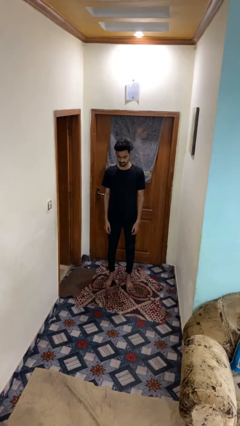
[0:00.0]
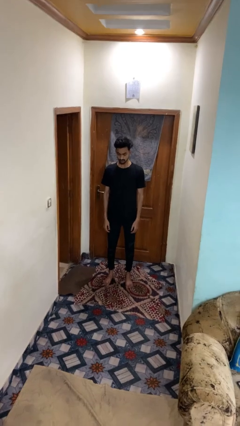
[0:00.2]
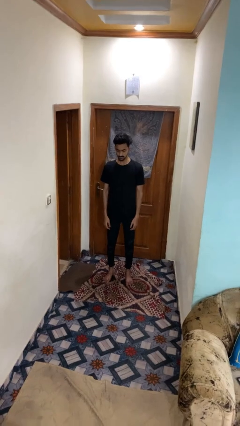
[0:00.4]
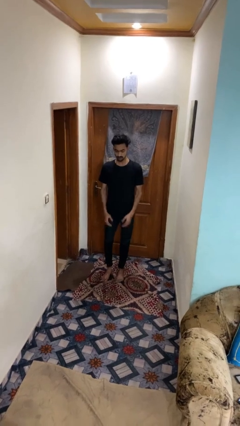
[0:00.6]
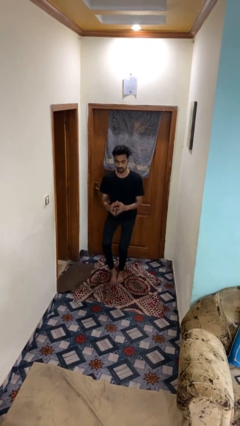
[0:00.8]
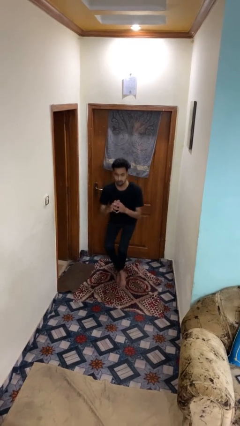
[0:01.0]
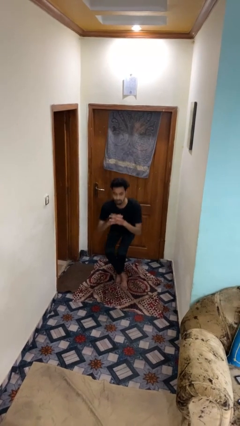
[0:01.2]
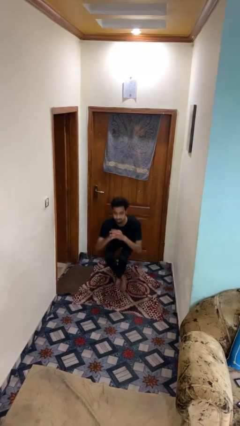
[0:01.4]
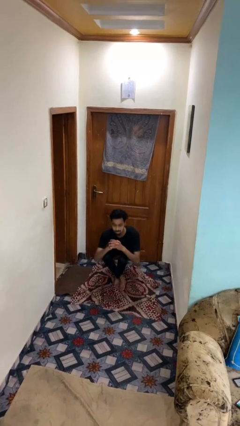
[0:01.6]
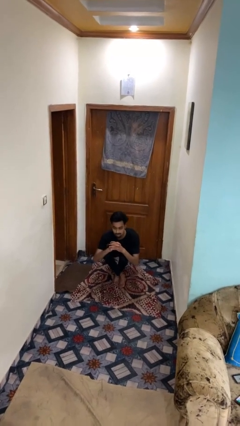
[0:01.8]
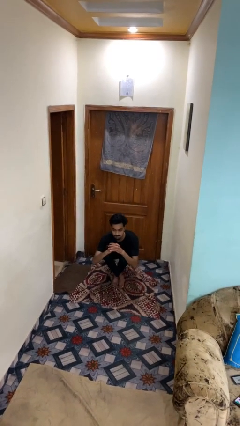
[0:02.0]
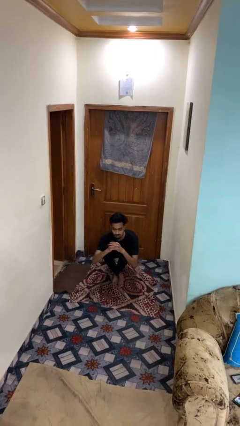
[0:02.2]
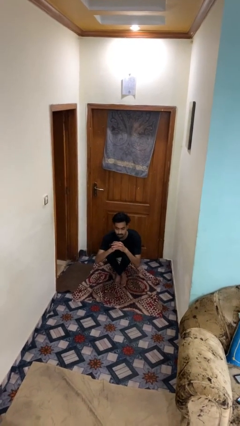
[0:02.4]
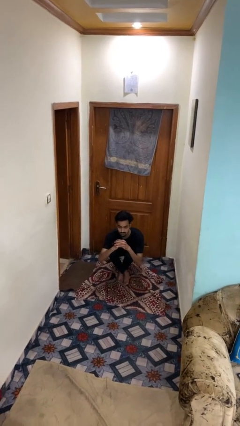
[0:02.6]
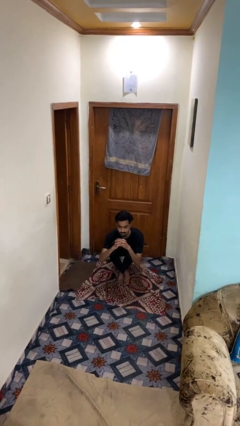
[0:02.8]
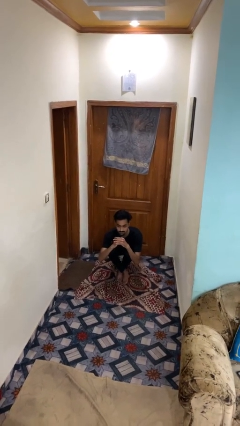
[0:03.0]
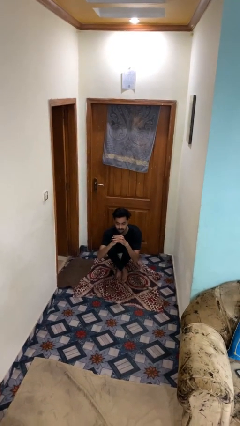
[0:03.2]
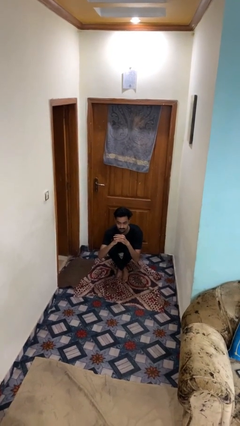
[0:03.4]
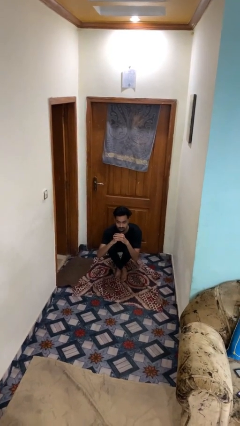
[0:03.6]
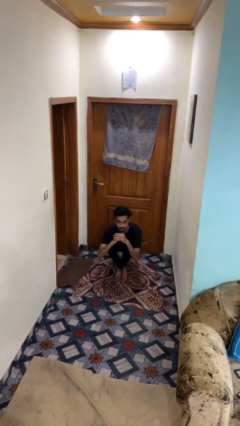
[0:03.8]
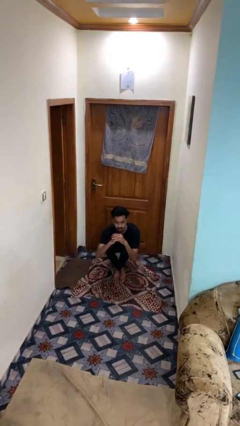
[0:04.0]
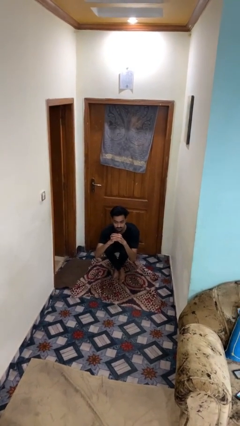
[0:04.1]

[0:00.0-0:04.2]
person sits crisscross

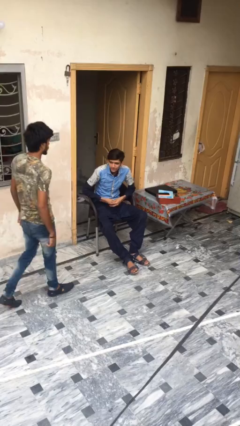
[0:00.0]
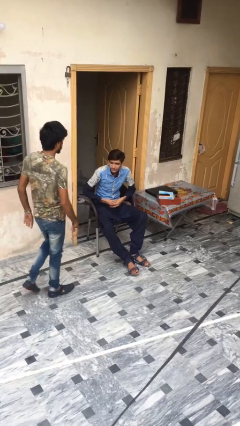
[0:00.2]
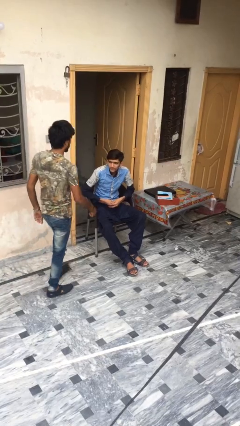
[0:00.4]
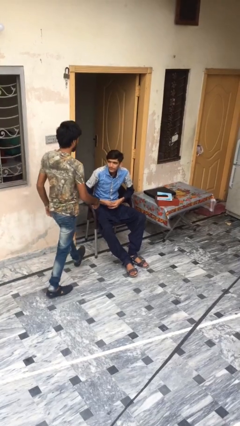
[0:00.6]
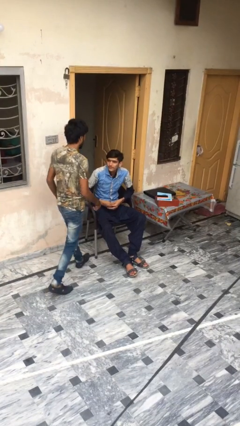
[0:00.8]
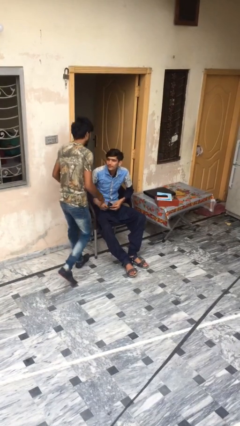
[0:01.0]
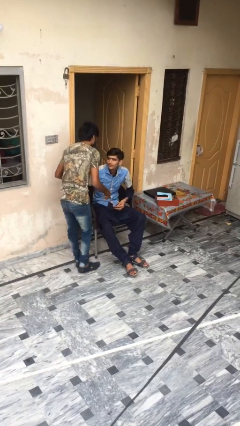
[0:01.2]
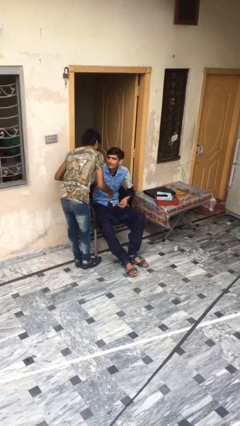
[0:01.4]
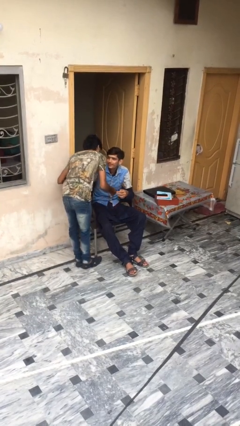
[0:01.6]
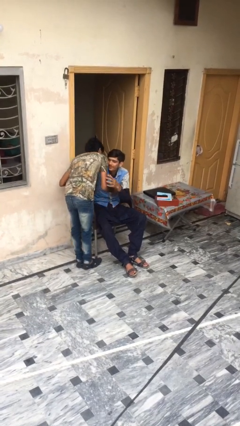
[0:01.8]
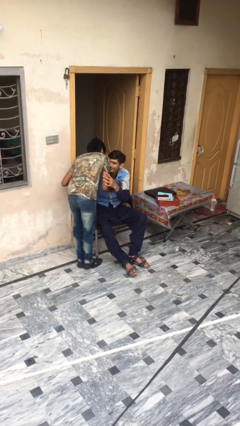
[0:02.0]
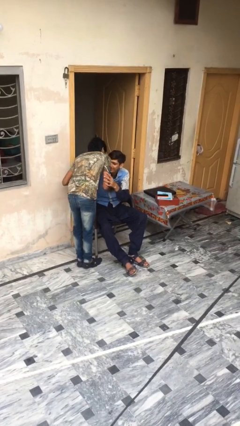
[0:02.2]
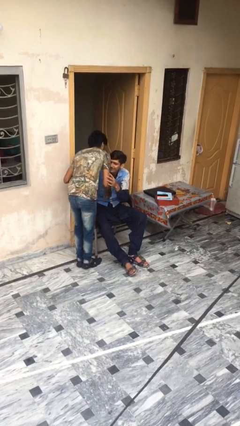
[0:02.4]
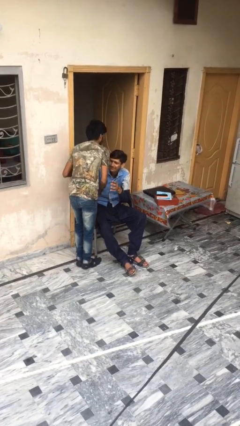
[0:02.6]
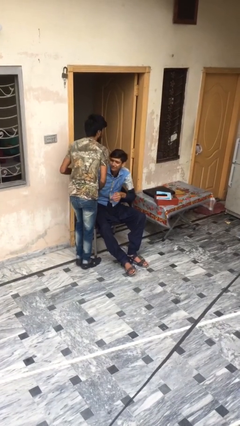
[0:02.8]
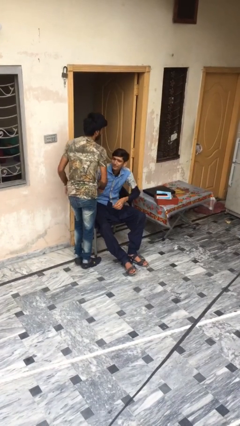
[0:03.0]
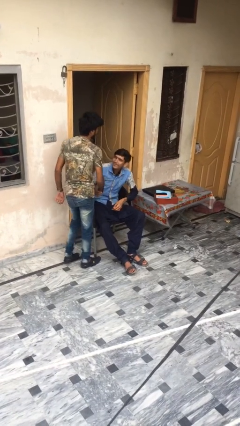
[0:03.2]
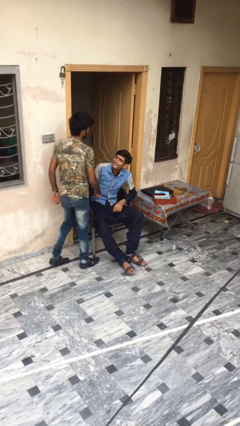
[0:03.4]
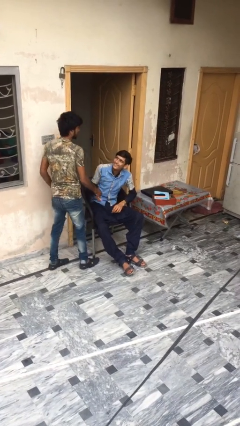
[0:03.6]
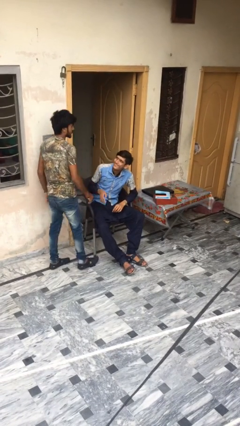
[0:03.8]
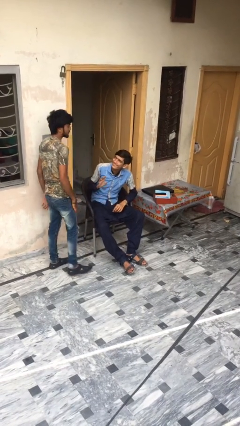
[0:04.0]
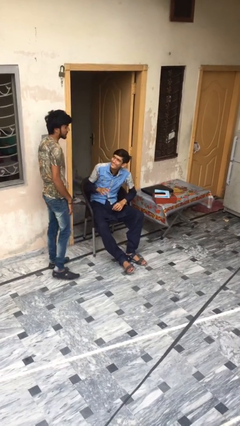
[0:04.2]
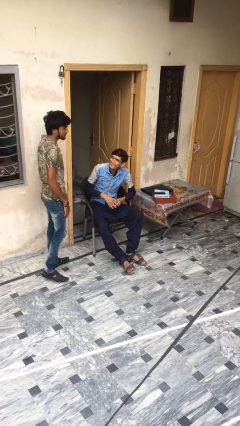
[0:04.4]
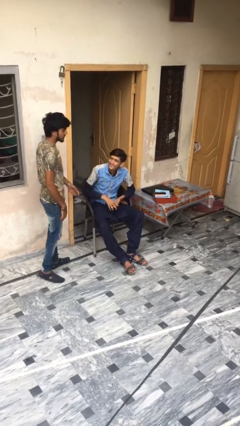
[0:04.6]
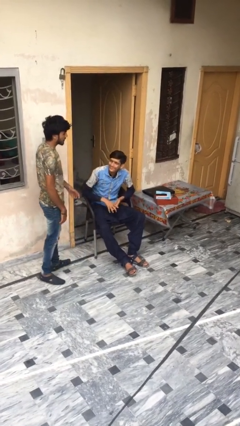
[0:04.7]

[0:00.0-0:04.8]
person embraces person

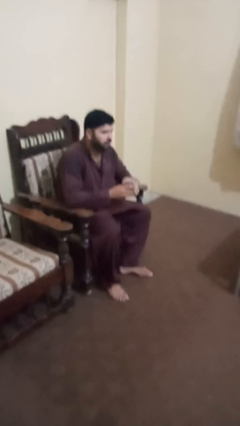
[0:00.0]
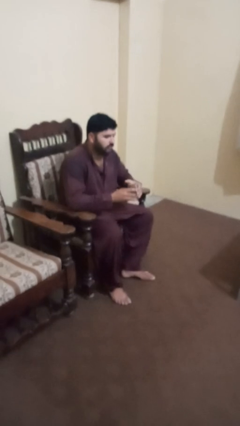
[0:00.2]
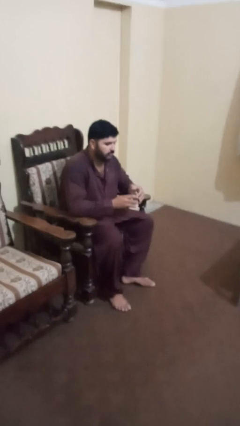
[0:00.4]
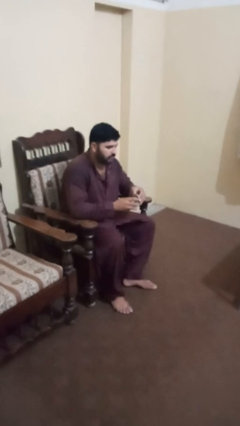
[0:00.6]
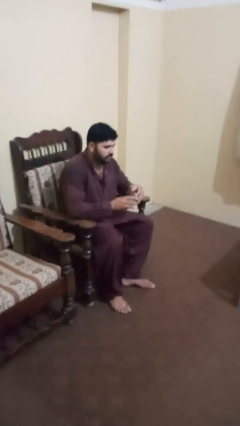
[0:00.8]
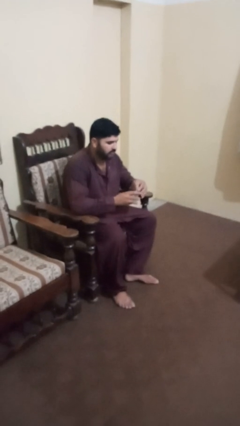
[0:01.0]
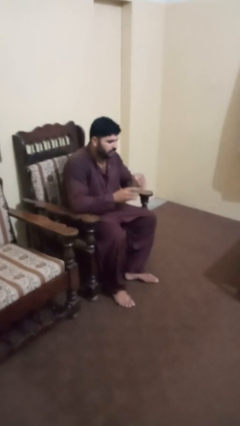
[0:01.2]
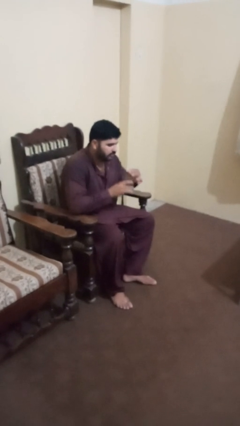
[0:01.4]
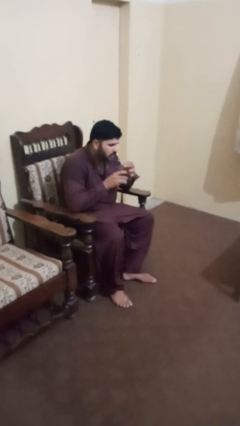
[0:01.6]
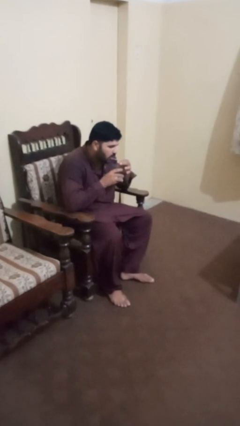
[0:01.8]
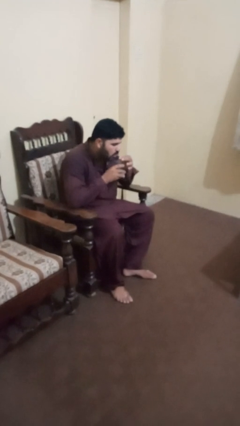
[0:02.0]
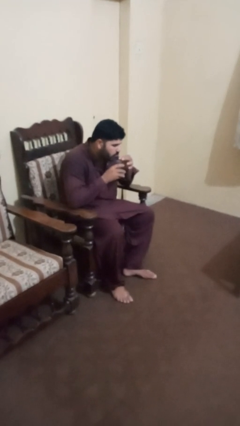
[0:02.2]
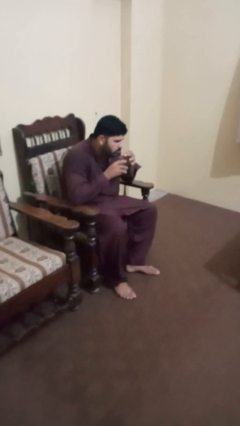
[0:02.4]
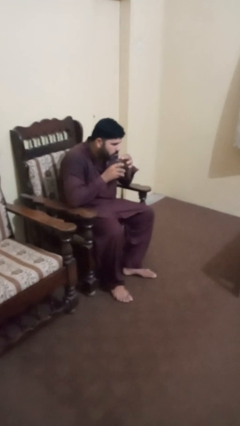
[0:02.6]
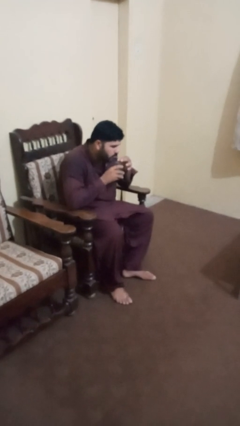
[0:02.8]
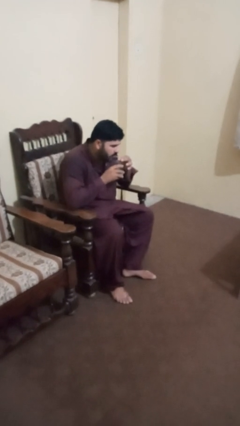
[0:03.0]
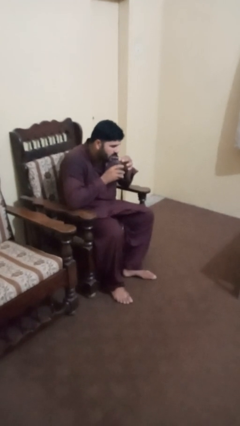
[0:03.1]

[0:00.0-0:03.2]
person drinks from straw

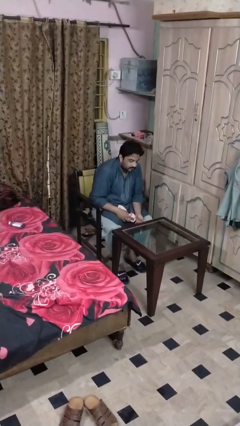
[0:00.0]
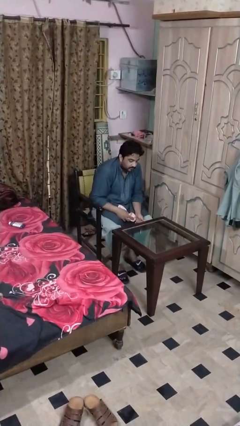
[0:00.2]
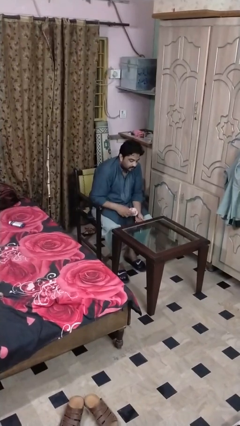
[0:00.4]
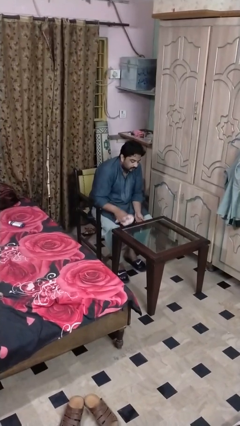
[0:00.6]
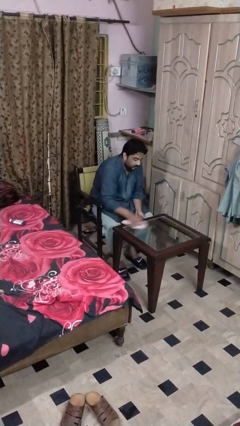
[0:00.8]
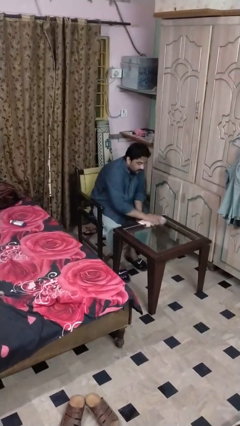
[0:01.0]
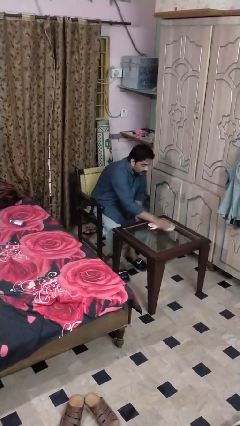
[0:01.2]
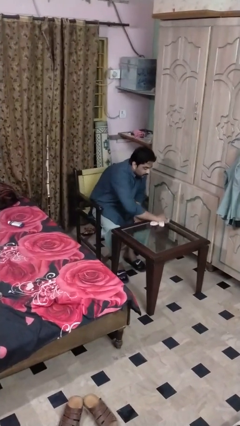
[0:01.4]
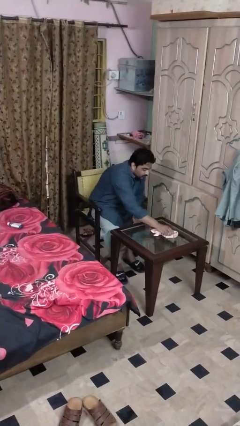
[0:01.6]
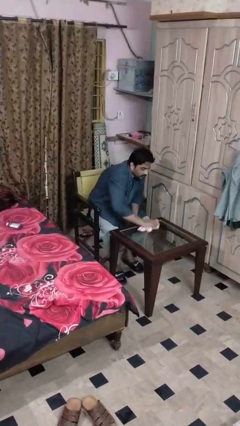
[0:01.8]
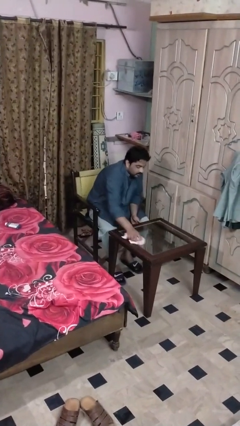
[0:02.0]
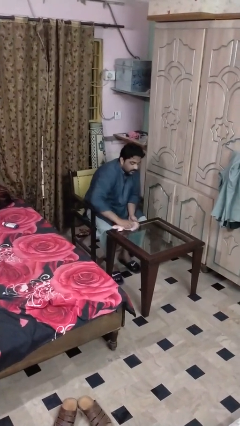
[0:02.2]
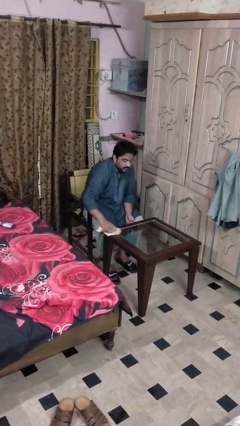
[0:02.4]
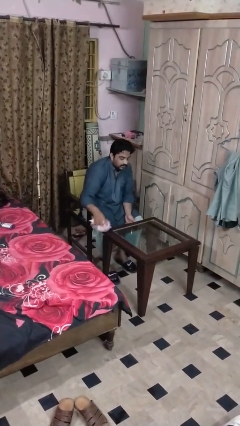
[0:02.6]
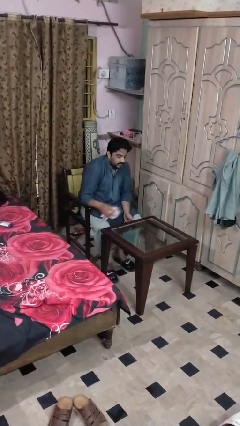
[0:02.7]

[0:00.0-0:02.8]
person cleans table with rag

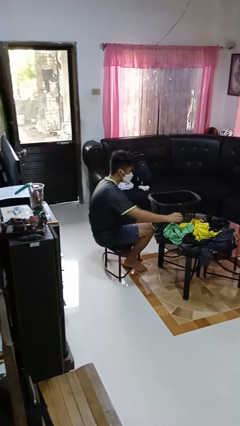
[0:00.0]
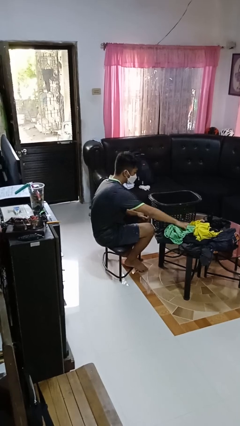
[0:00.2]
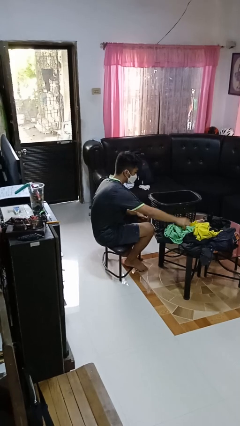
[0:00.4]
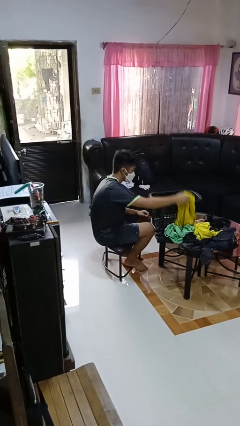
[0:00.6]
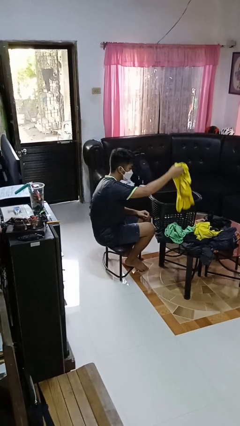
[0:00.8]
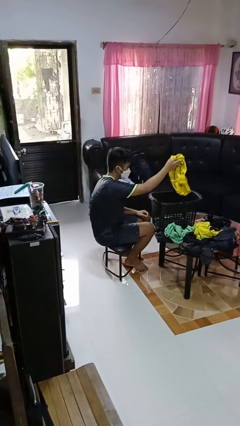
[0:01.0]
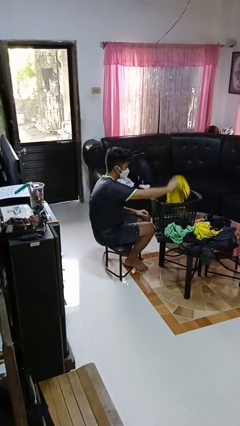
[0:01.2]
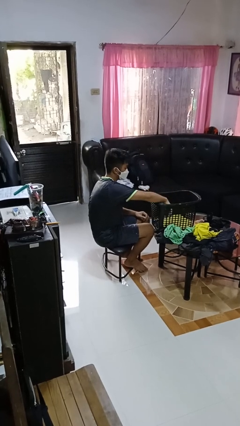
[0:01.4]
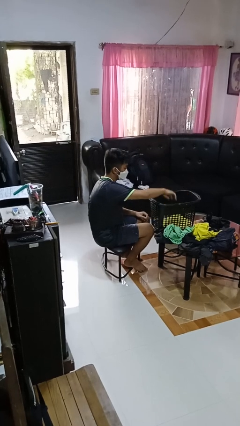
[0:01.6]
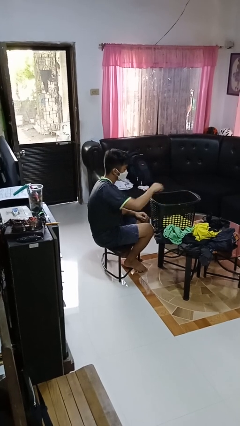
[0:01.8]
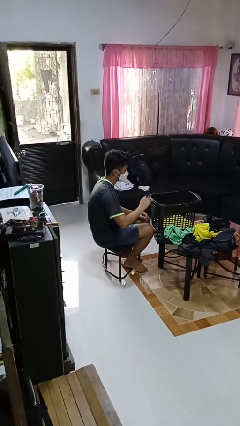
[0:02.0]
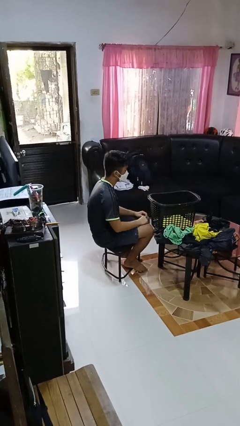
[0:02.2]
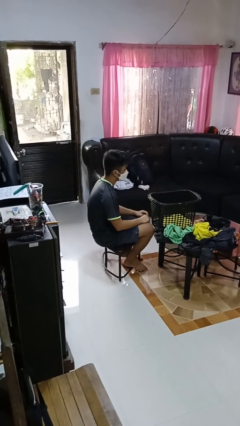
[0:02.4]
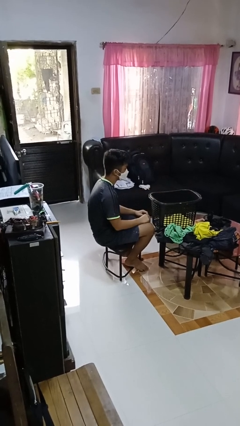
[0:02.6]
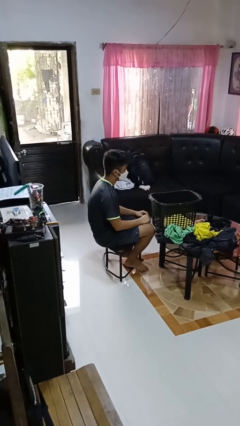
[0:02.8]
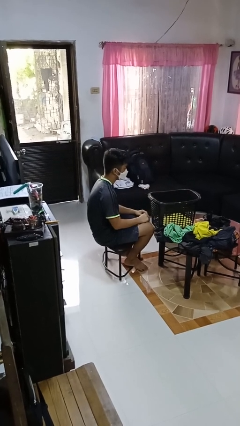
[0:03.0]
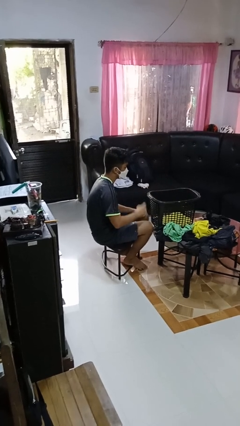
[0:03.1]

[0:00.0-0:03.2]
person puts object into basket
